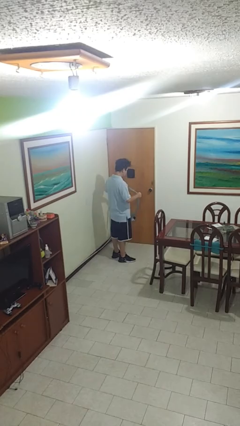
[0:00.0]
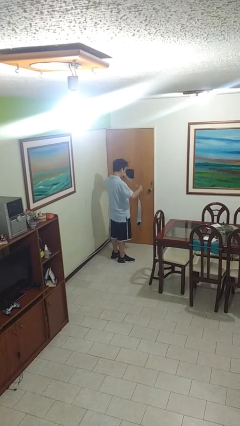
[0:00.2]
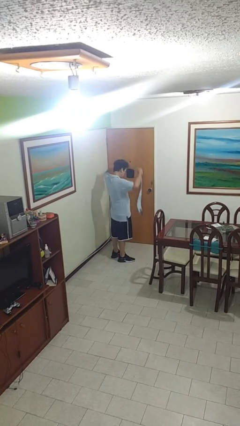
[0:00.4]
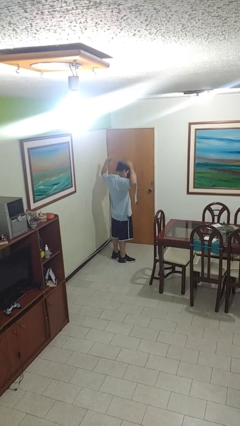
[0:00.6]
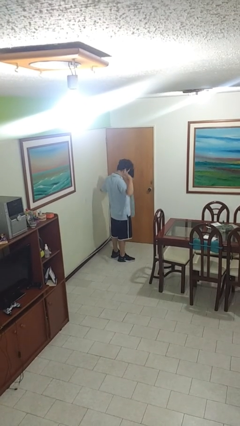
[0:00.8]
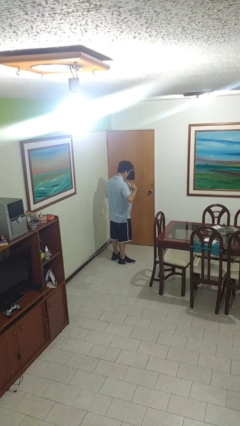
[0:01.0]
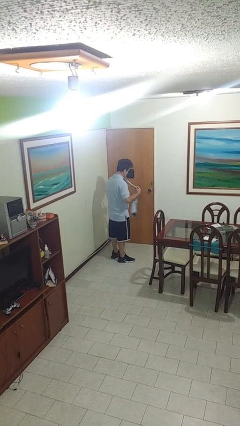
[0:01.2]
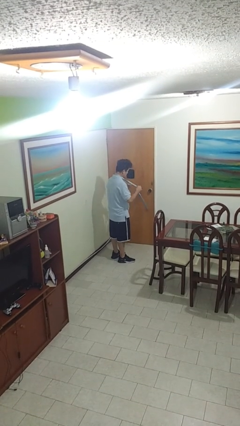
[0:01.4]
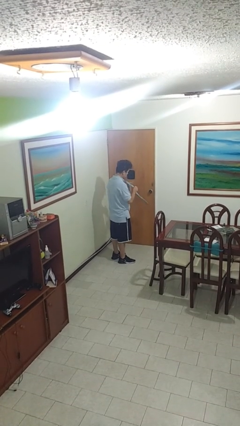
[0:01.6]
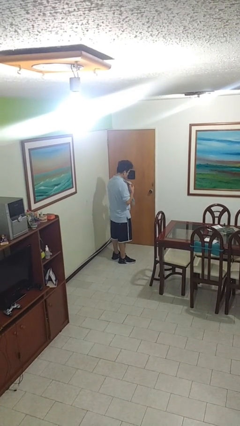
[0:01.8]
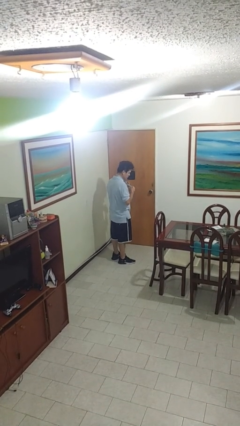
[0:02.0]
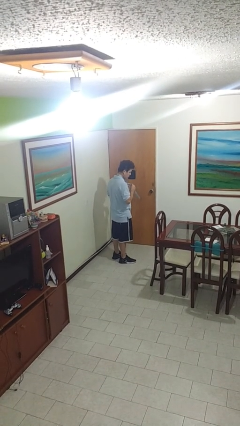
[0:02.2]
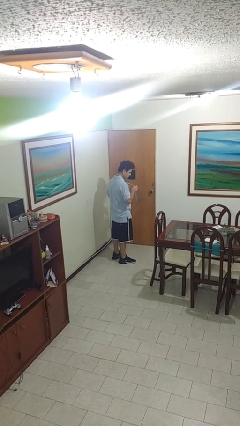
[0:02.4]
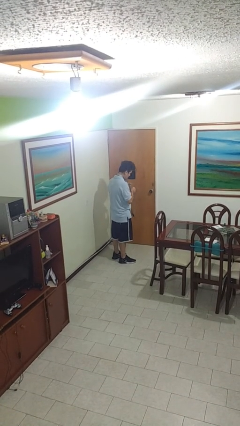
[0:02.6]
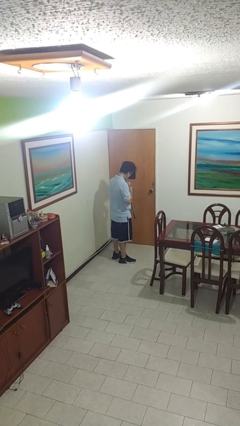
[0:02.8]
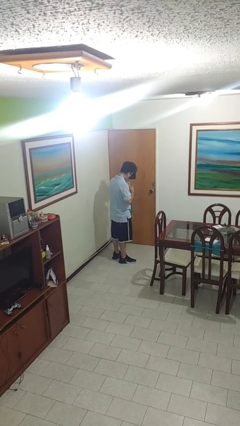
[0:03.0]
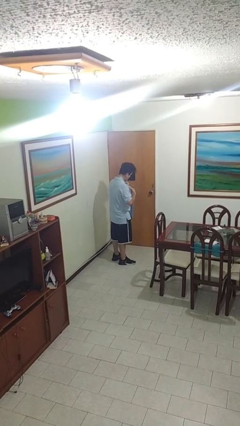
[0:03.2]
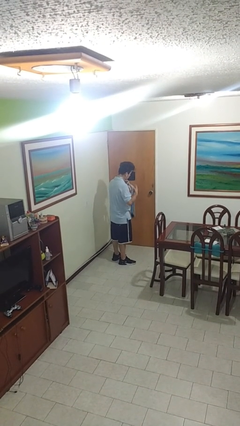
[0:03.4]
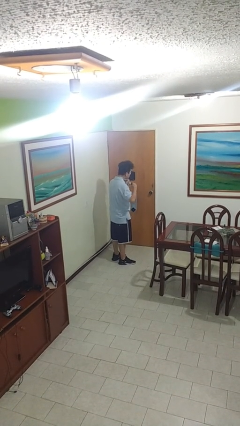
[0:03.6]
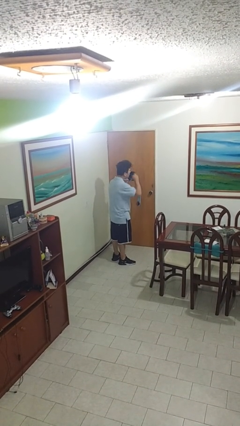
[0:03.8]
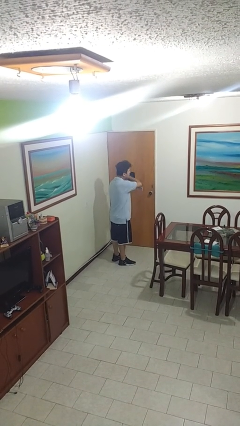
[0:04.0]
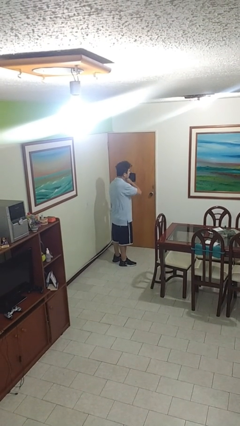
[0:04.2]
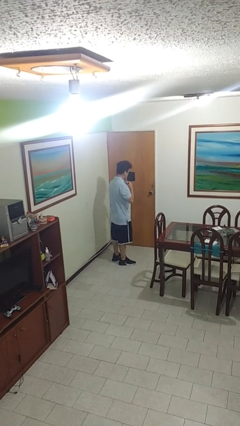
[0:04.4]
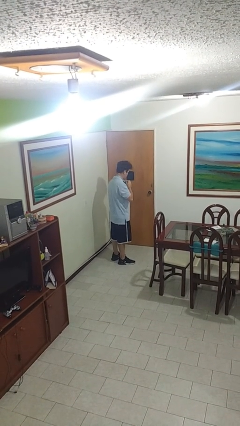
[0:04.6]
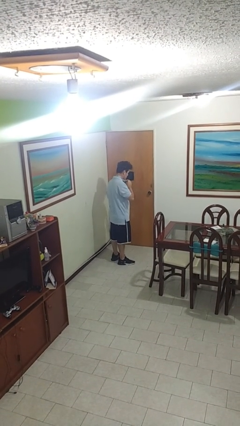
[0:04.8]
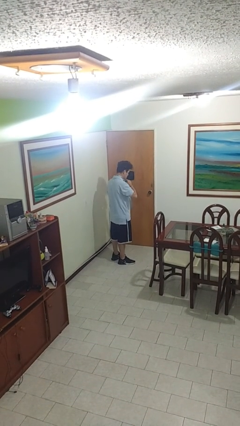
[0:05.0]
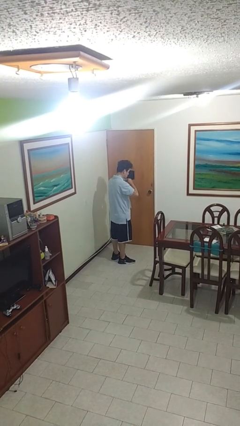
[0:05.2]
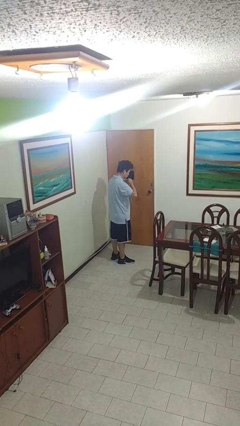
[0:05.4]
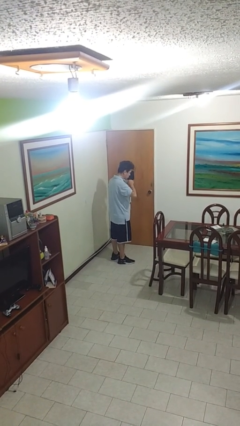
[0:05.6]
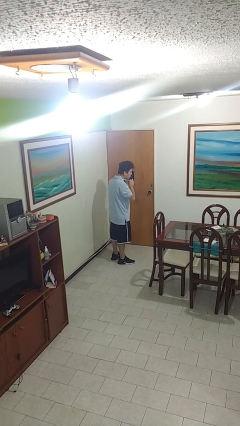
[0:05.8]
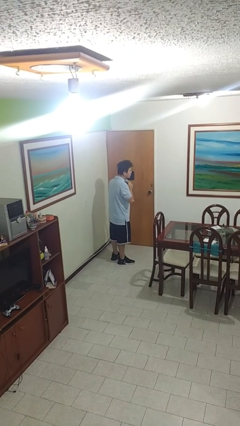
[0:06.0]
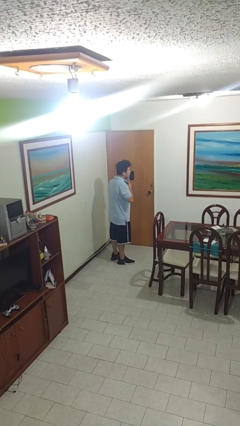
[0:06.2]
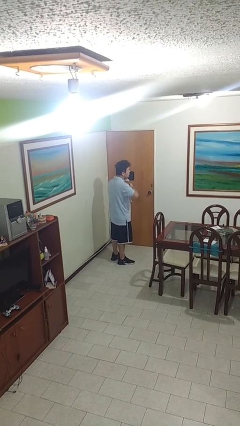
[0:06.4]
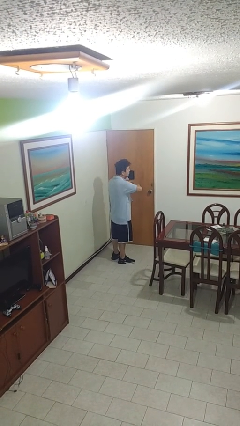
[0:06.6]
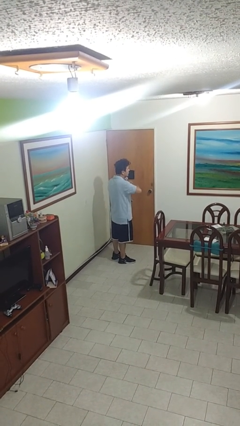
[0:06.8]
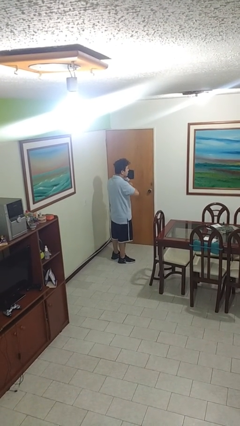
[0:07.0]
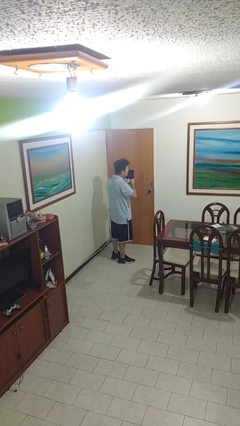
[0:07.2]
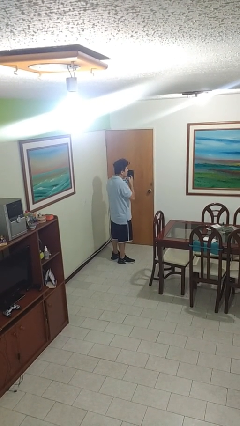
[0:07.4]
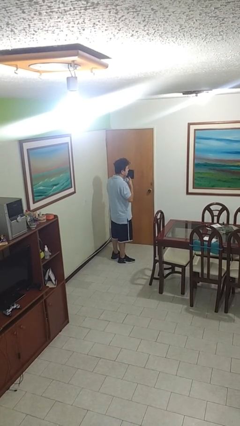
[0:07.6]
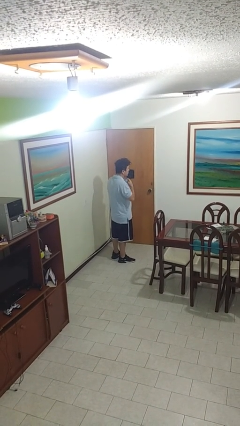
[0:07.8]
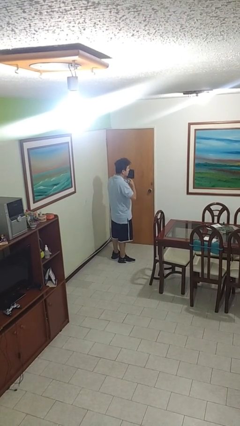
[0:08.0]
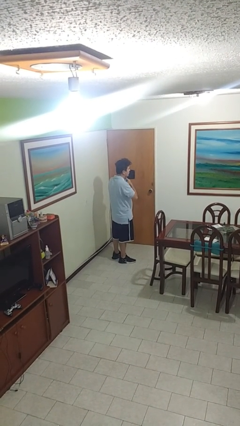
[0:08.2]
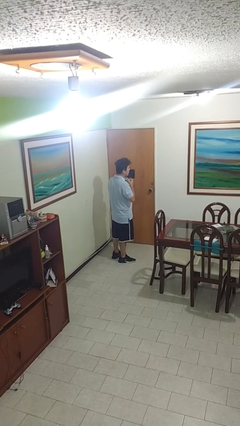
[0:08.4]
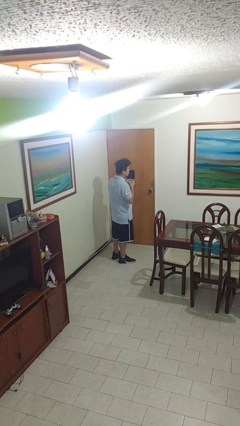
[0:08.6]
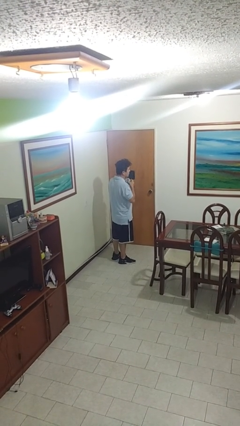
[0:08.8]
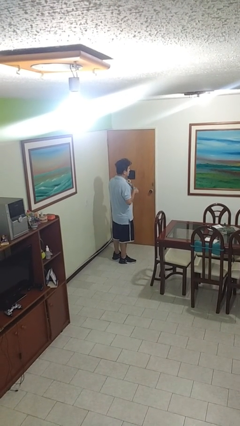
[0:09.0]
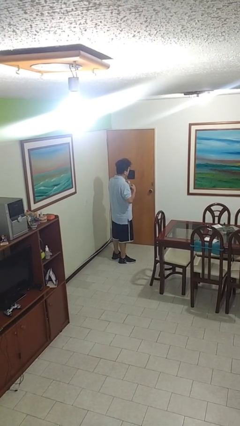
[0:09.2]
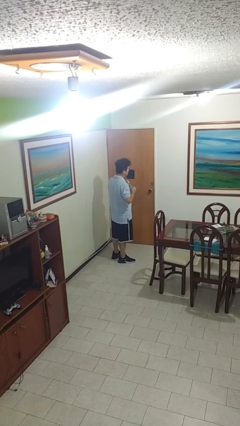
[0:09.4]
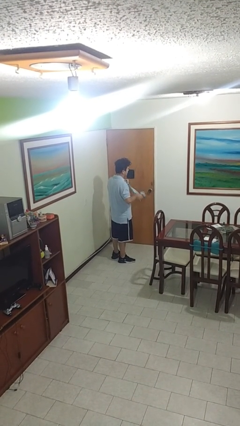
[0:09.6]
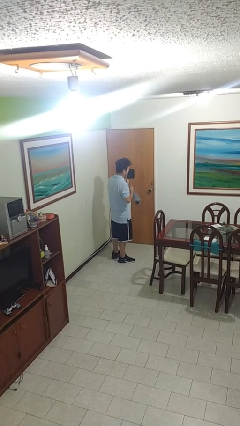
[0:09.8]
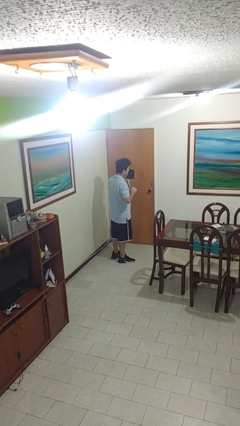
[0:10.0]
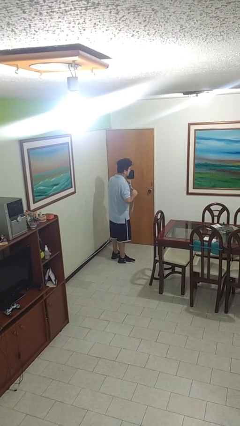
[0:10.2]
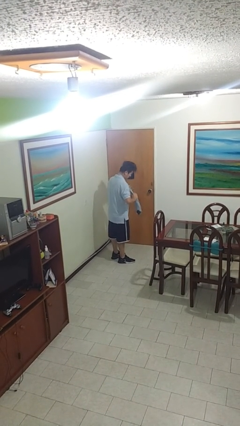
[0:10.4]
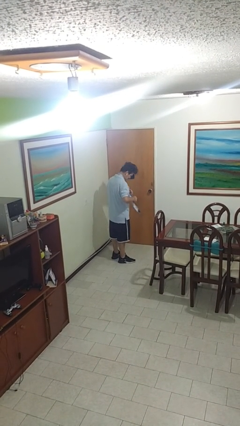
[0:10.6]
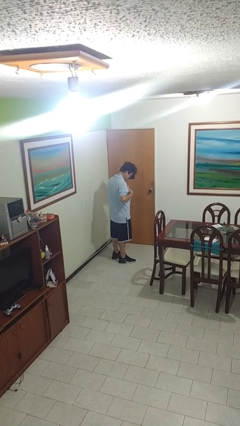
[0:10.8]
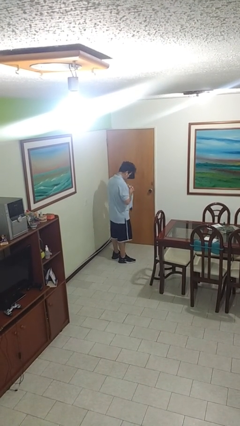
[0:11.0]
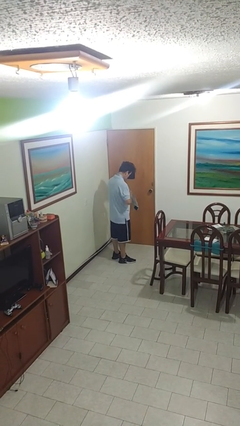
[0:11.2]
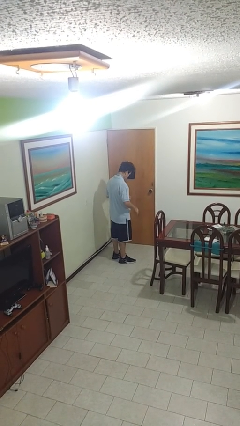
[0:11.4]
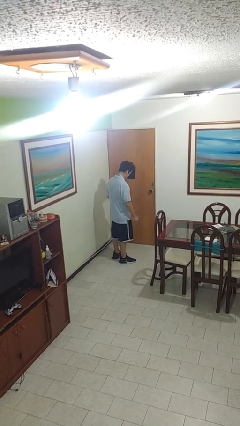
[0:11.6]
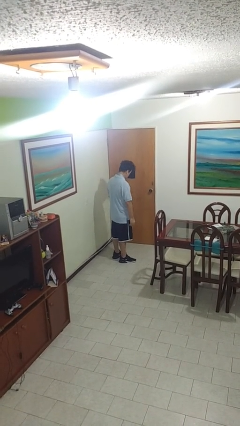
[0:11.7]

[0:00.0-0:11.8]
person puts on necktie

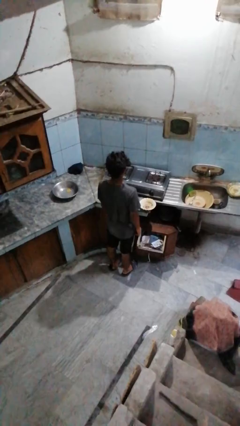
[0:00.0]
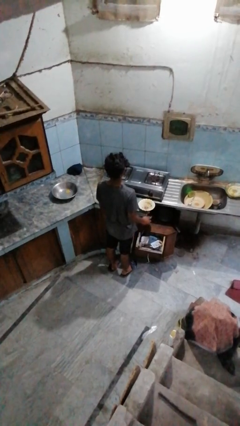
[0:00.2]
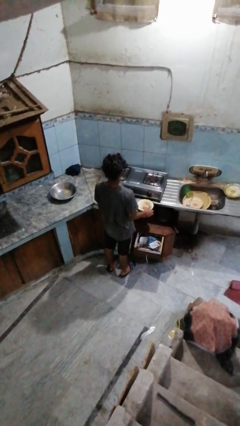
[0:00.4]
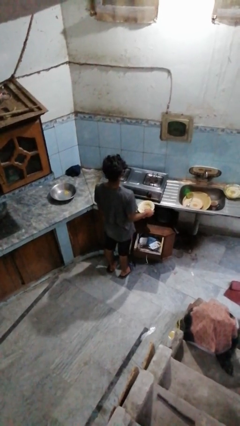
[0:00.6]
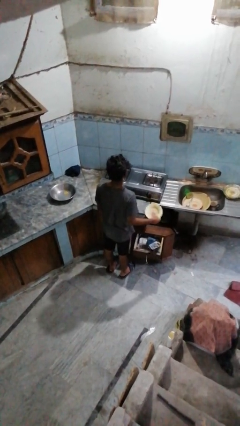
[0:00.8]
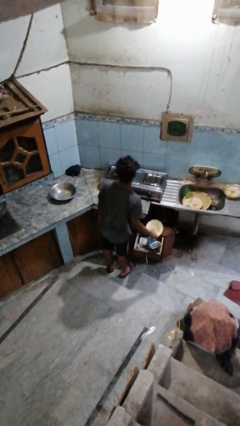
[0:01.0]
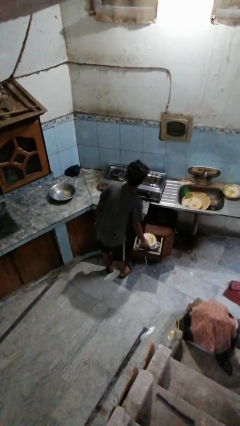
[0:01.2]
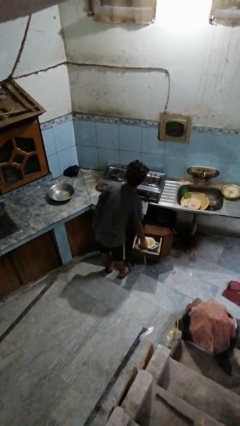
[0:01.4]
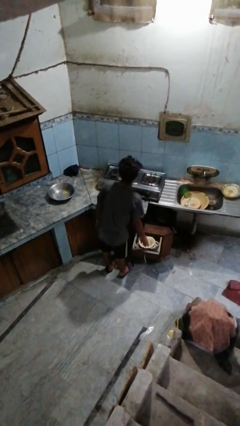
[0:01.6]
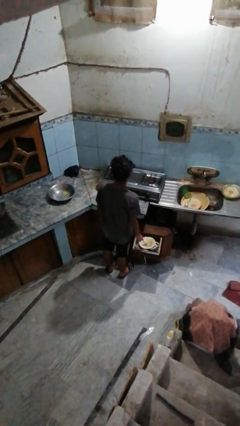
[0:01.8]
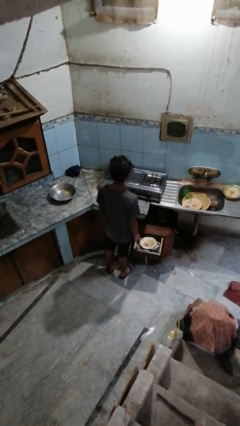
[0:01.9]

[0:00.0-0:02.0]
person puts object into kitchen drawer

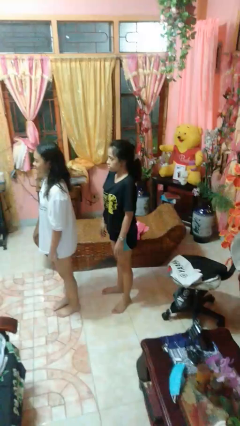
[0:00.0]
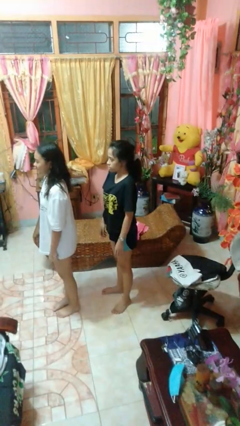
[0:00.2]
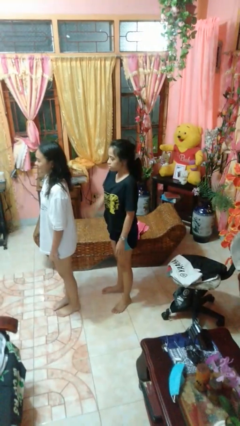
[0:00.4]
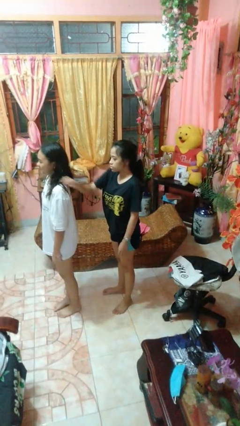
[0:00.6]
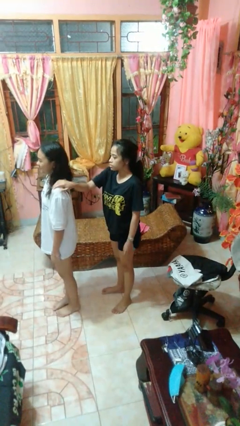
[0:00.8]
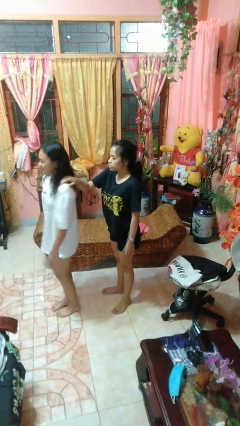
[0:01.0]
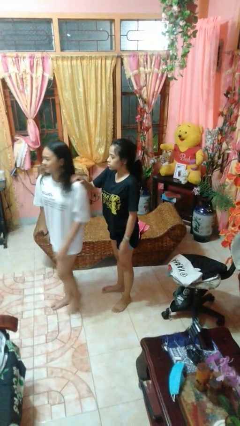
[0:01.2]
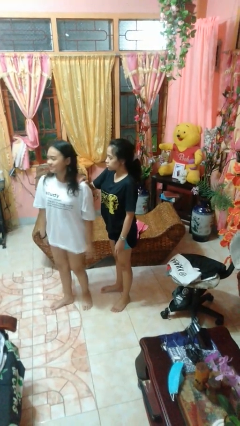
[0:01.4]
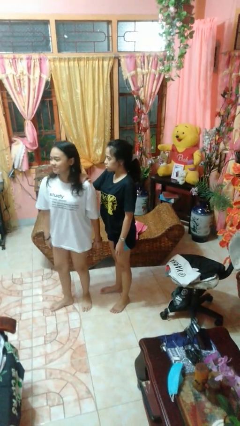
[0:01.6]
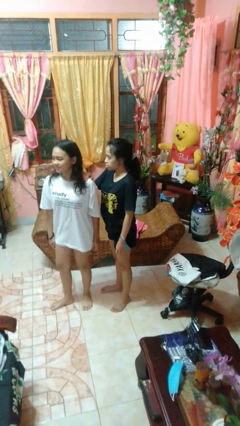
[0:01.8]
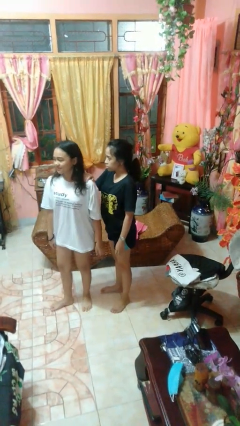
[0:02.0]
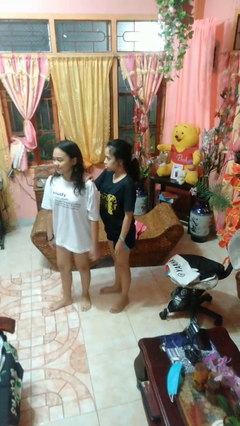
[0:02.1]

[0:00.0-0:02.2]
person grabs person by shoulder

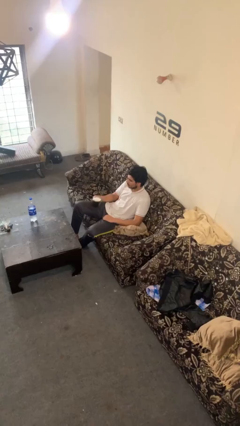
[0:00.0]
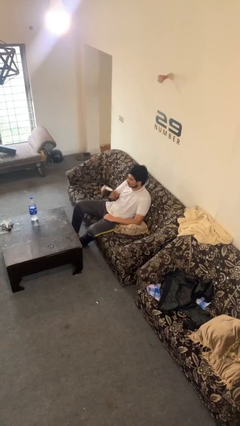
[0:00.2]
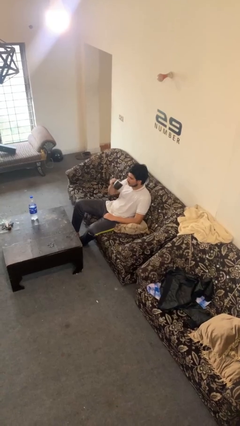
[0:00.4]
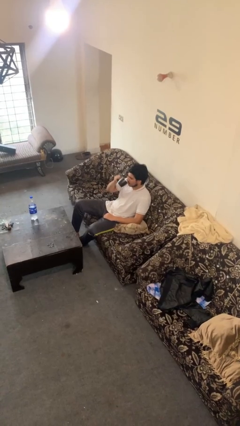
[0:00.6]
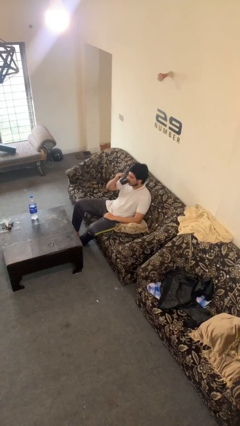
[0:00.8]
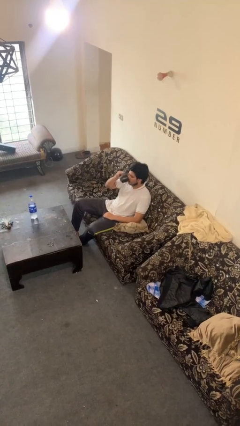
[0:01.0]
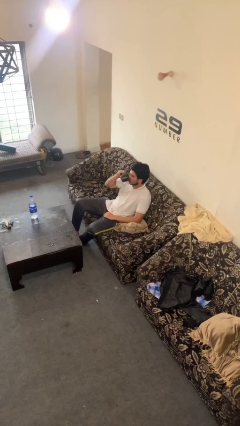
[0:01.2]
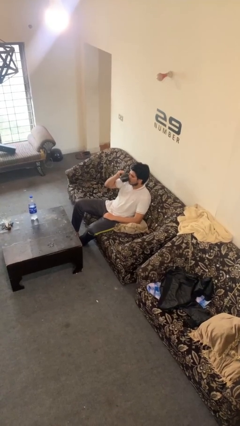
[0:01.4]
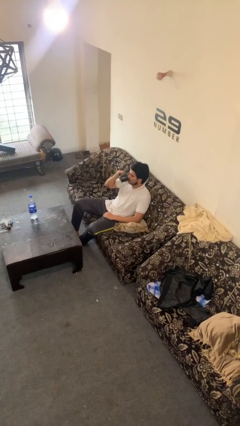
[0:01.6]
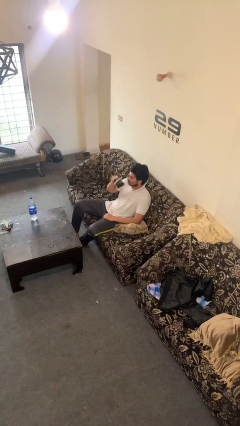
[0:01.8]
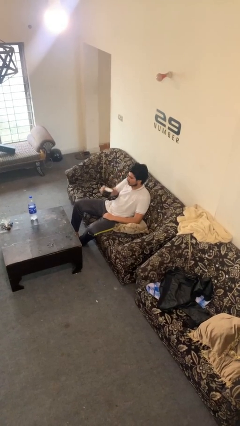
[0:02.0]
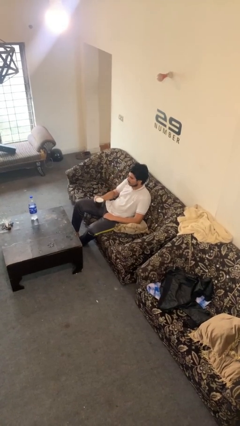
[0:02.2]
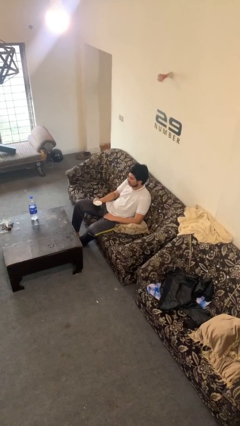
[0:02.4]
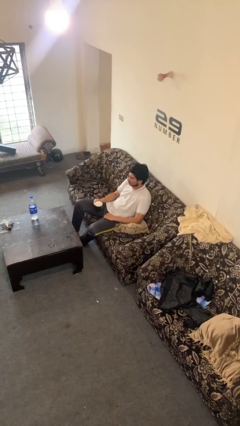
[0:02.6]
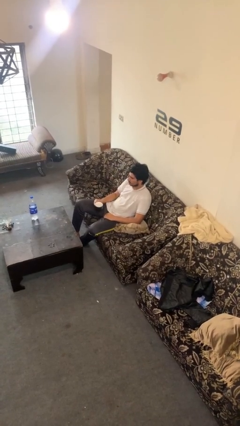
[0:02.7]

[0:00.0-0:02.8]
person drinks from mug
